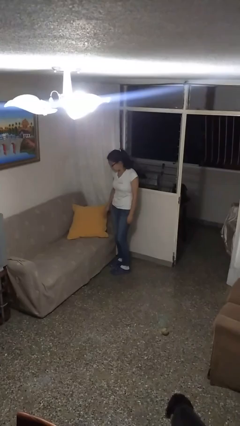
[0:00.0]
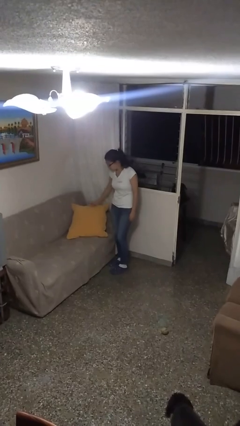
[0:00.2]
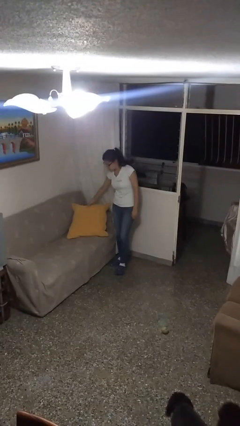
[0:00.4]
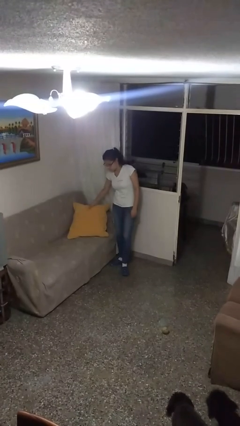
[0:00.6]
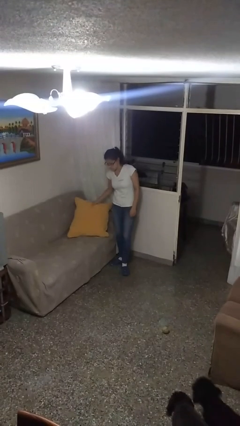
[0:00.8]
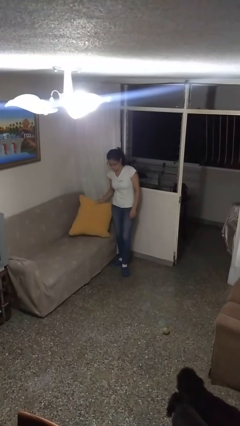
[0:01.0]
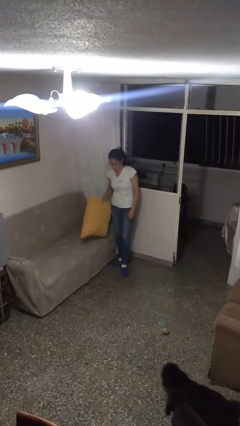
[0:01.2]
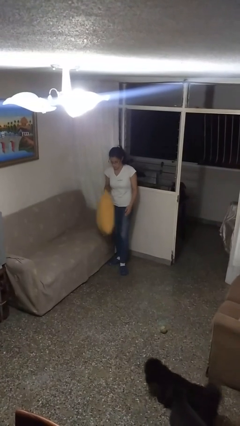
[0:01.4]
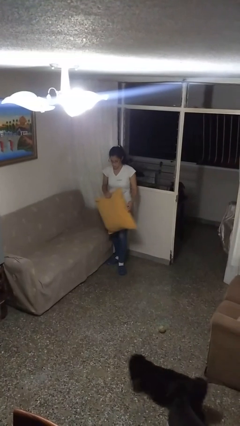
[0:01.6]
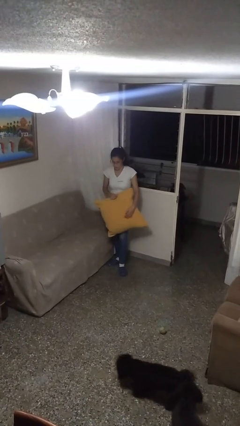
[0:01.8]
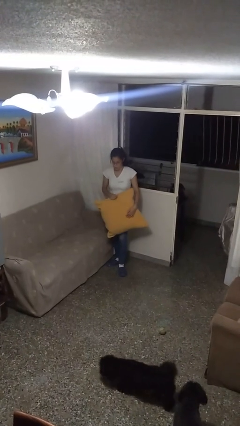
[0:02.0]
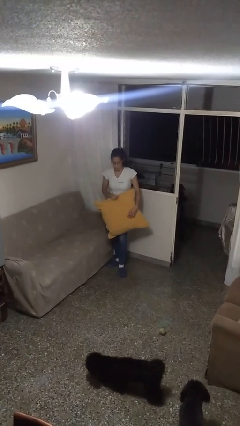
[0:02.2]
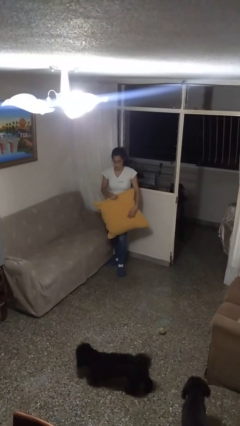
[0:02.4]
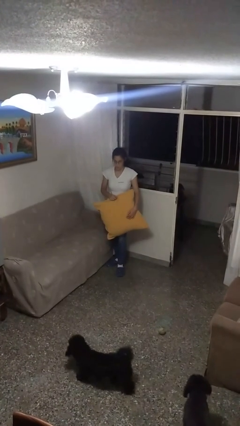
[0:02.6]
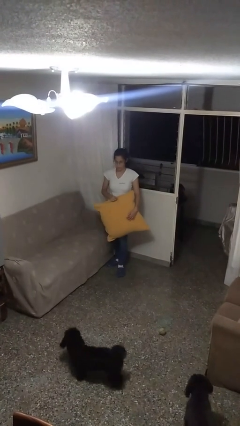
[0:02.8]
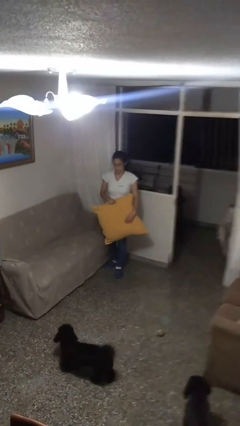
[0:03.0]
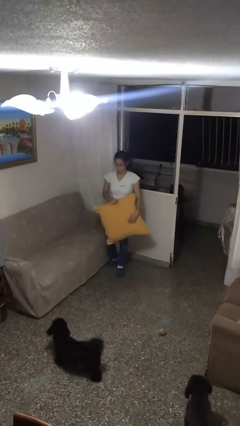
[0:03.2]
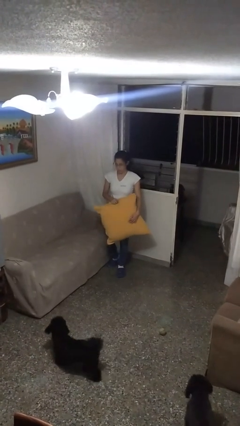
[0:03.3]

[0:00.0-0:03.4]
person picks up object from couch

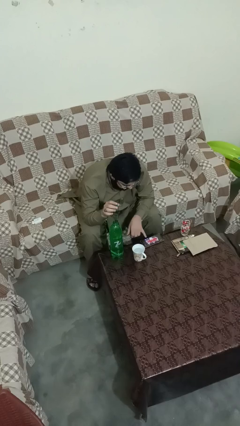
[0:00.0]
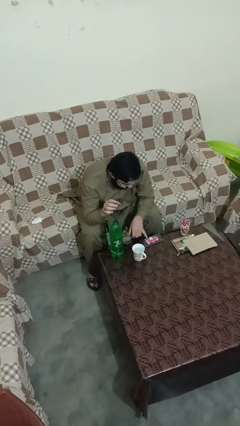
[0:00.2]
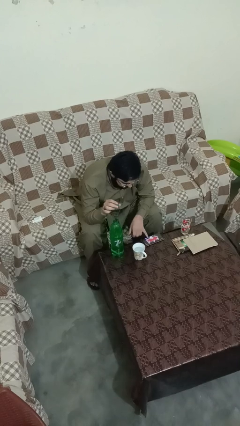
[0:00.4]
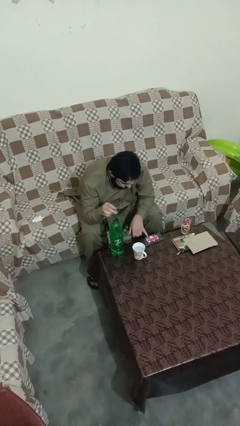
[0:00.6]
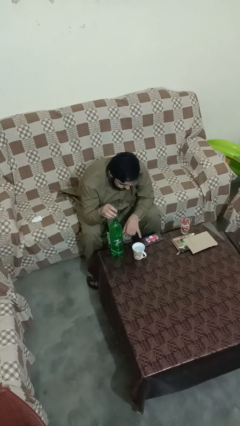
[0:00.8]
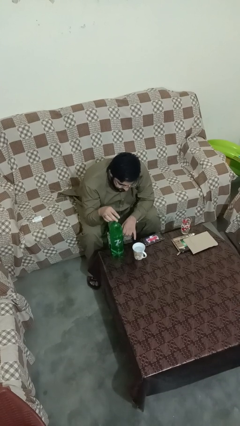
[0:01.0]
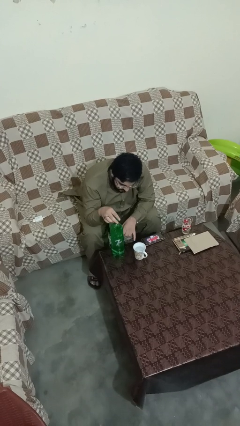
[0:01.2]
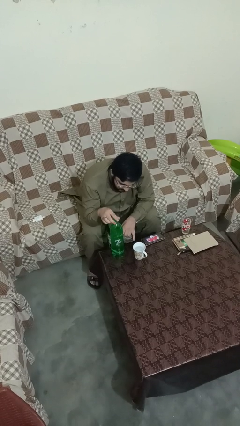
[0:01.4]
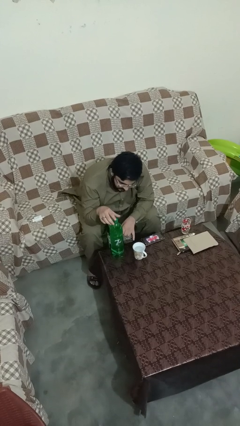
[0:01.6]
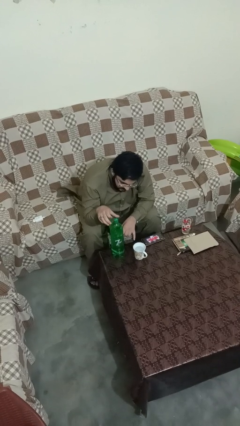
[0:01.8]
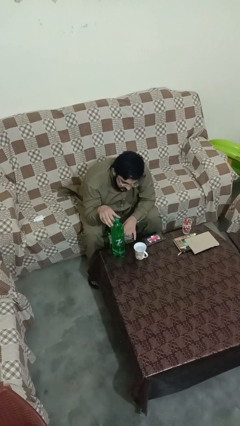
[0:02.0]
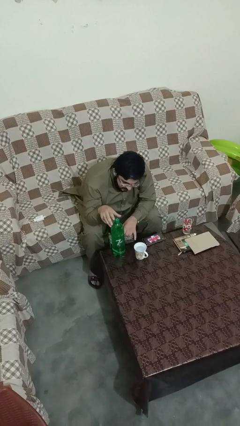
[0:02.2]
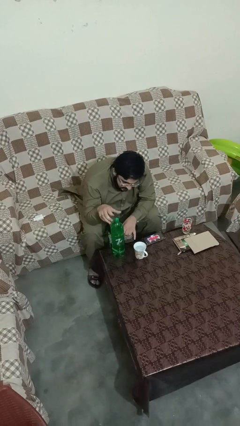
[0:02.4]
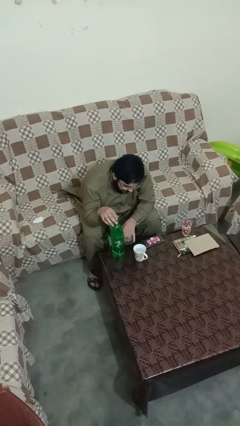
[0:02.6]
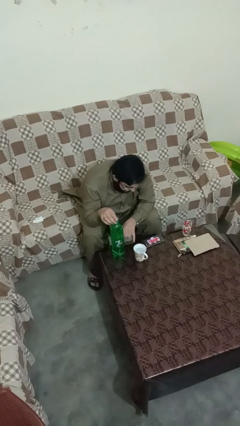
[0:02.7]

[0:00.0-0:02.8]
person screws lid to bottle

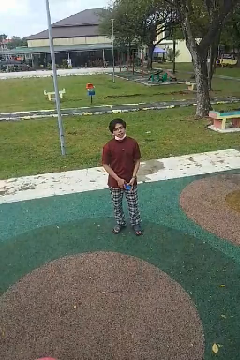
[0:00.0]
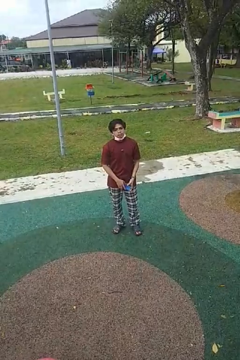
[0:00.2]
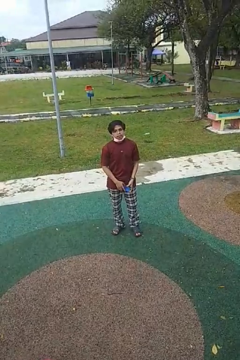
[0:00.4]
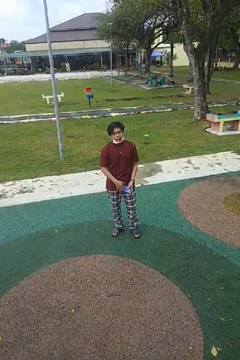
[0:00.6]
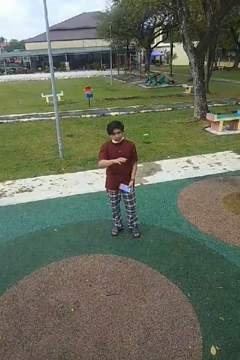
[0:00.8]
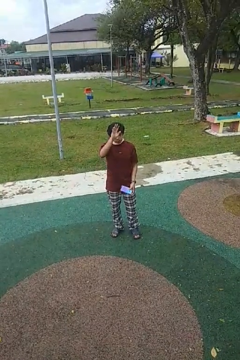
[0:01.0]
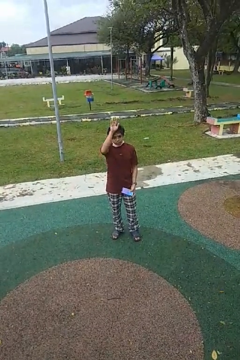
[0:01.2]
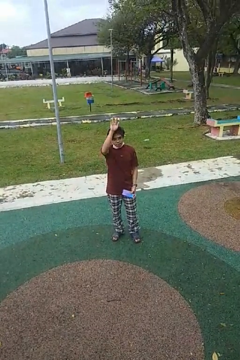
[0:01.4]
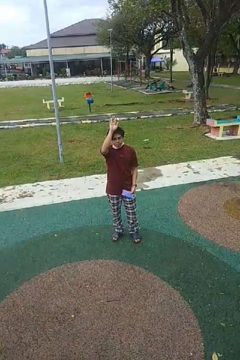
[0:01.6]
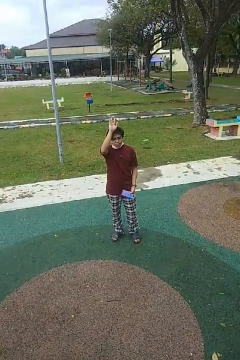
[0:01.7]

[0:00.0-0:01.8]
person gestures raise hand

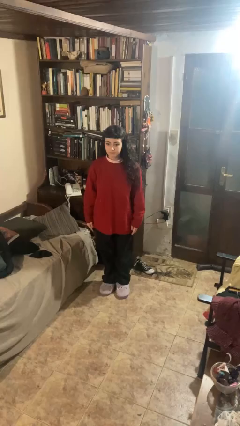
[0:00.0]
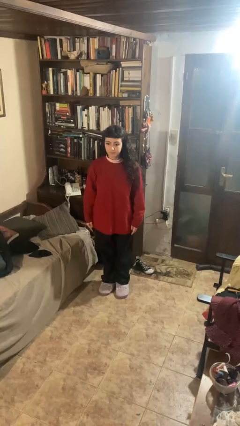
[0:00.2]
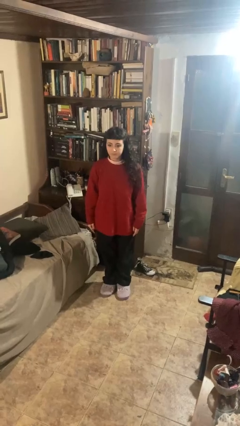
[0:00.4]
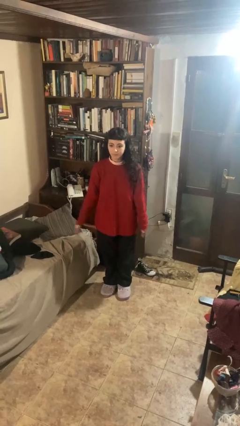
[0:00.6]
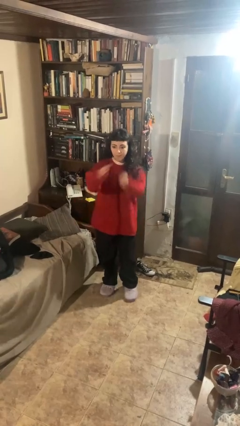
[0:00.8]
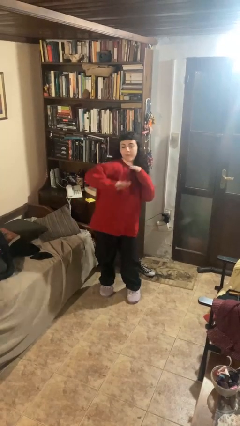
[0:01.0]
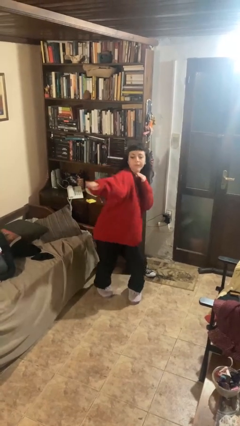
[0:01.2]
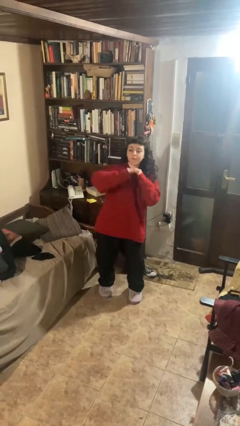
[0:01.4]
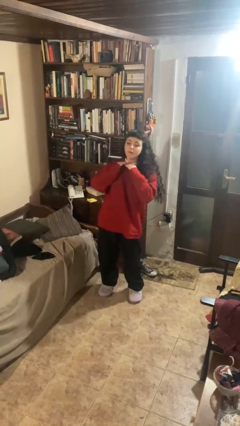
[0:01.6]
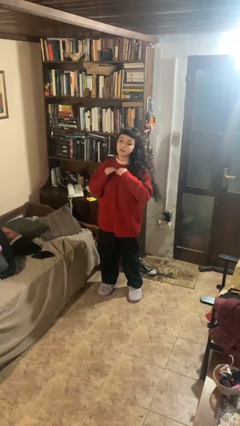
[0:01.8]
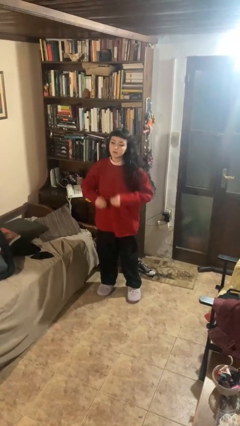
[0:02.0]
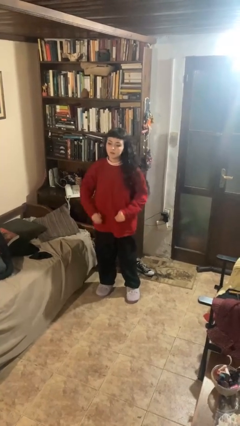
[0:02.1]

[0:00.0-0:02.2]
person karate chop

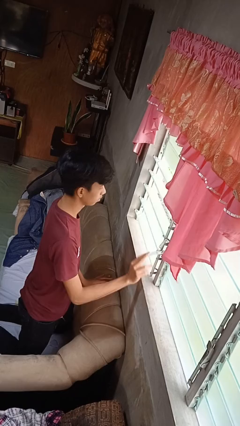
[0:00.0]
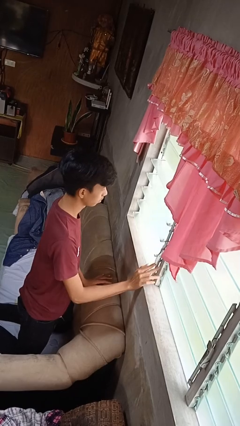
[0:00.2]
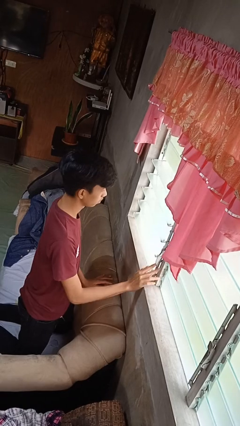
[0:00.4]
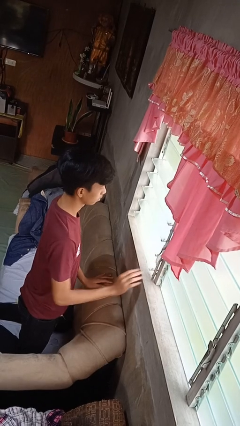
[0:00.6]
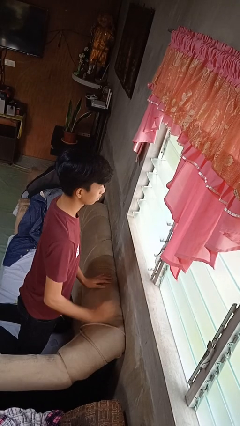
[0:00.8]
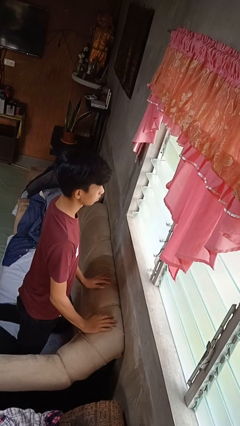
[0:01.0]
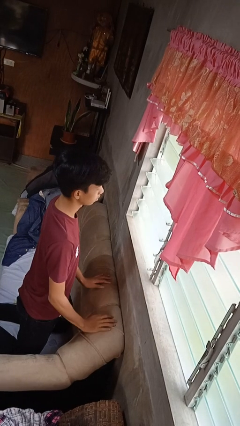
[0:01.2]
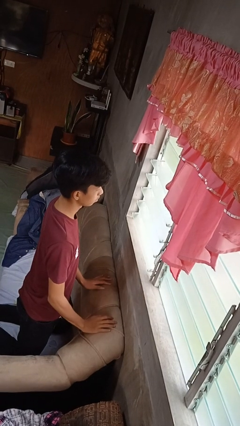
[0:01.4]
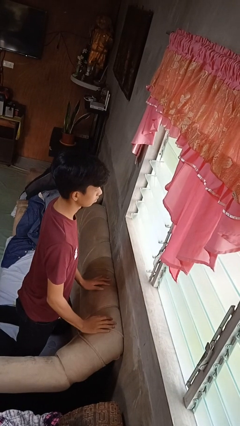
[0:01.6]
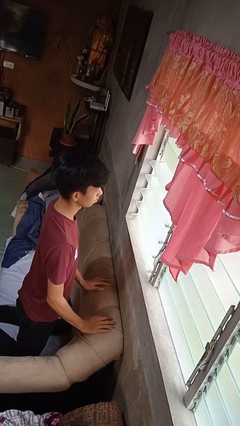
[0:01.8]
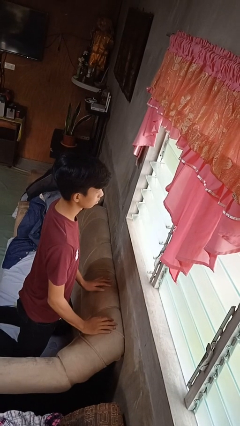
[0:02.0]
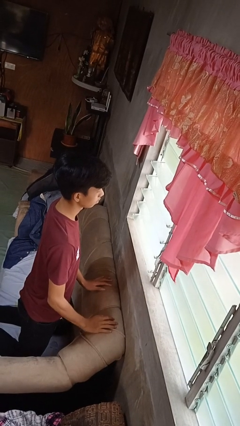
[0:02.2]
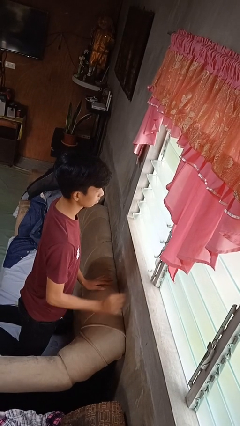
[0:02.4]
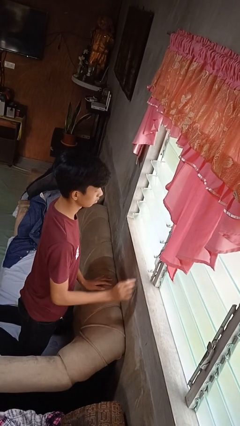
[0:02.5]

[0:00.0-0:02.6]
person opens home window

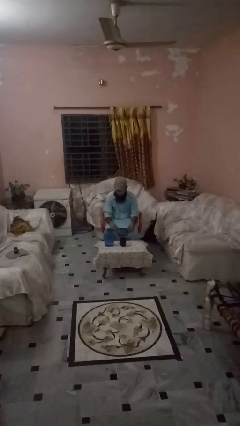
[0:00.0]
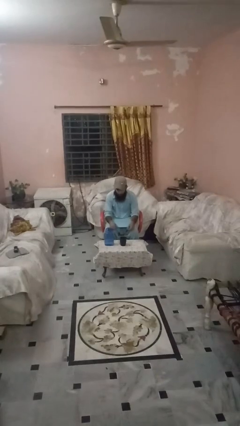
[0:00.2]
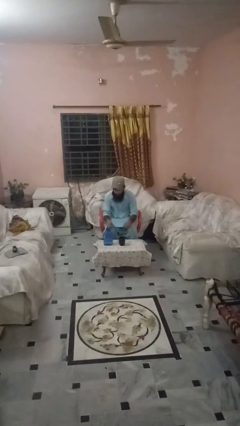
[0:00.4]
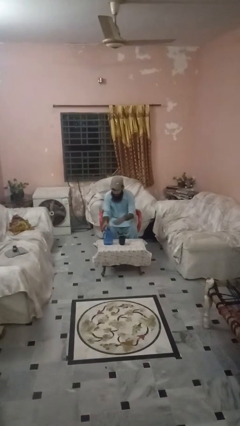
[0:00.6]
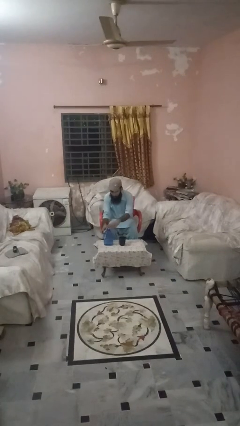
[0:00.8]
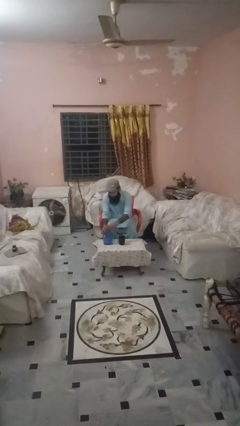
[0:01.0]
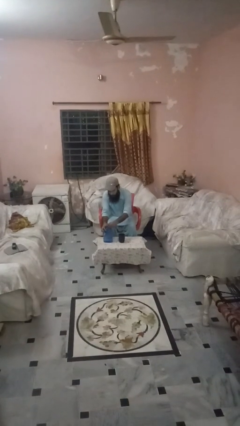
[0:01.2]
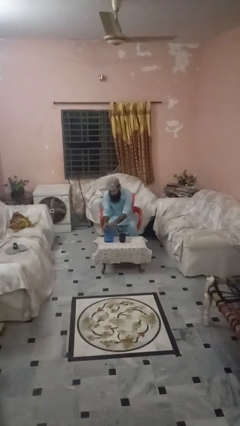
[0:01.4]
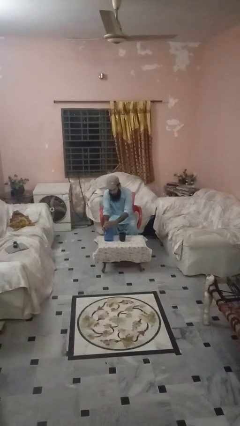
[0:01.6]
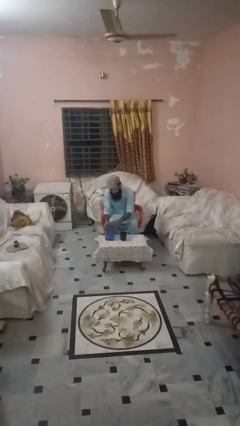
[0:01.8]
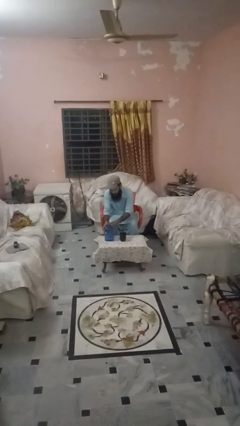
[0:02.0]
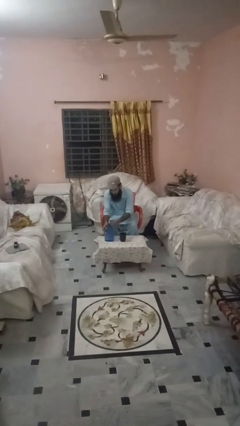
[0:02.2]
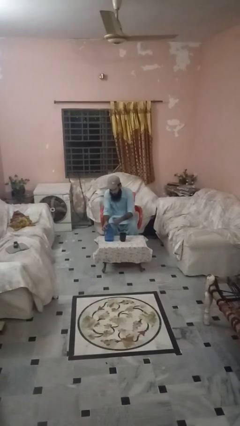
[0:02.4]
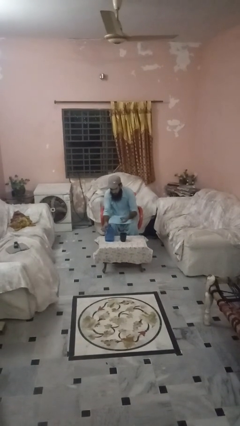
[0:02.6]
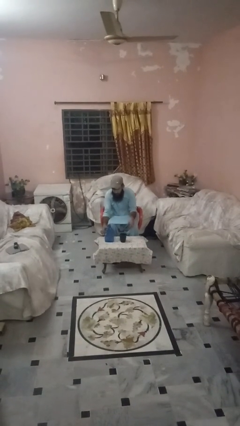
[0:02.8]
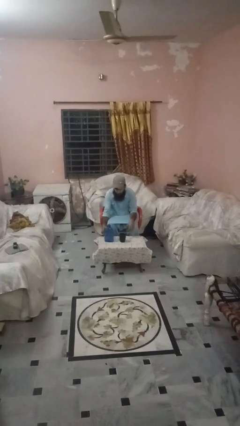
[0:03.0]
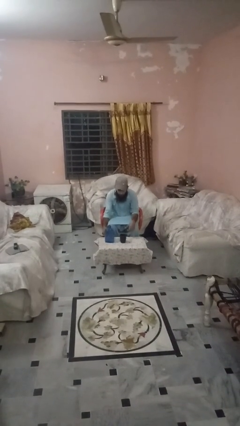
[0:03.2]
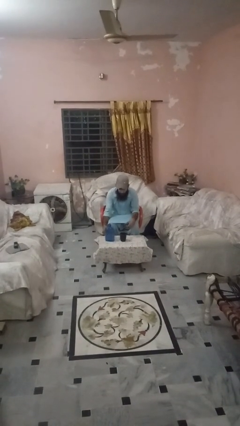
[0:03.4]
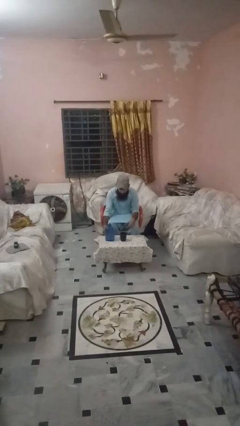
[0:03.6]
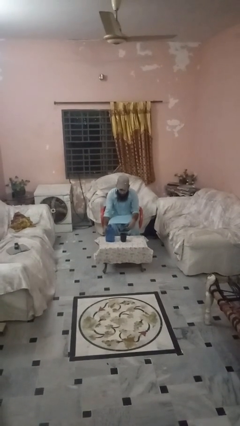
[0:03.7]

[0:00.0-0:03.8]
person unscrews lid from bottle

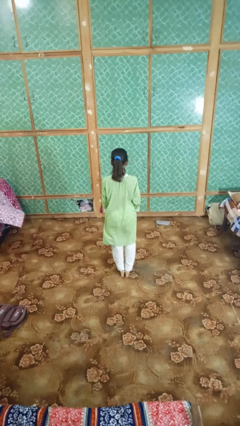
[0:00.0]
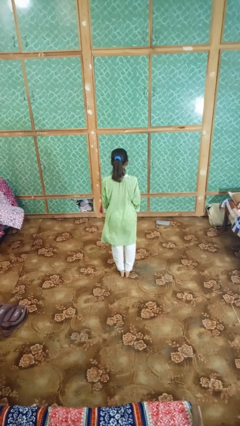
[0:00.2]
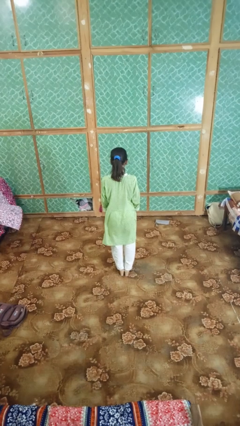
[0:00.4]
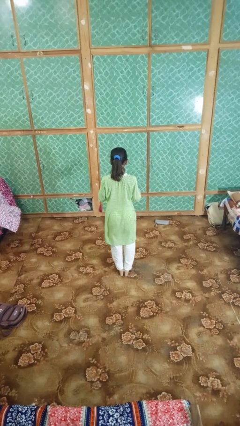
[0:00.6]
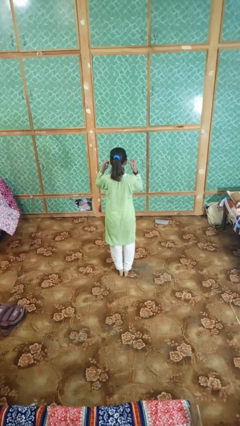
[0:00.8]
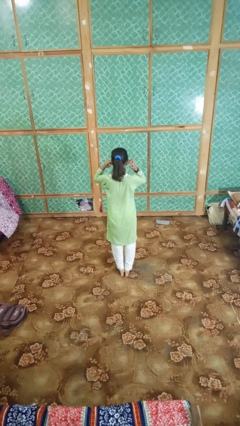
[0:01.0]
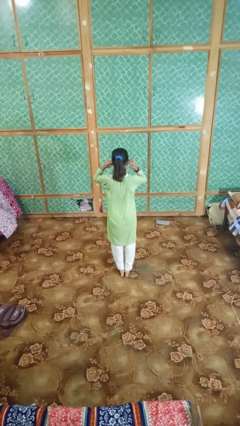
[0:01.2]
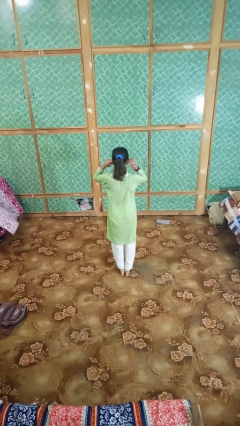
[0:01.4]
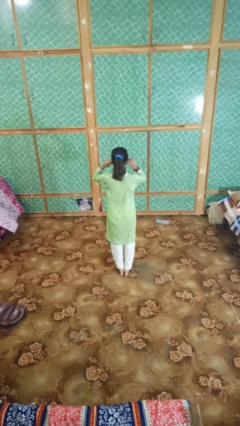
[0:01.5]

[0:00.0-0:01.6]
person puts fingers in ear
